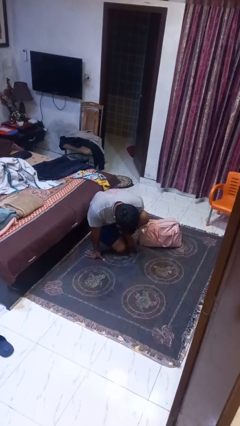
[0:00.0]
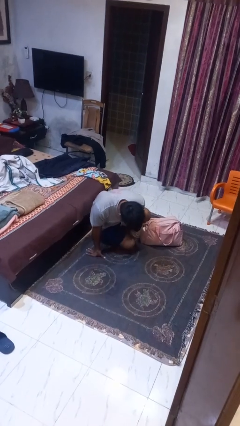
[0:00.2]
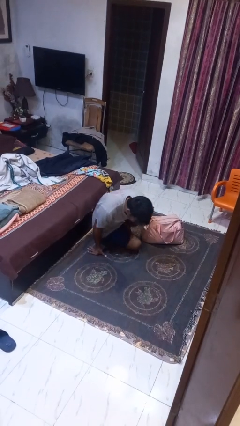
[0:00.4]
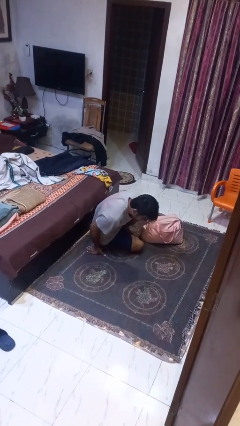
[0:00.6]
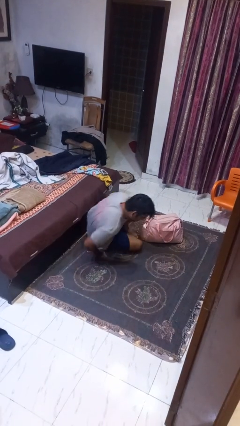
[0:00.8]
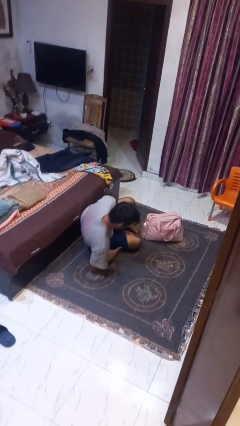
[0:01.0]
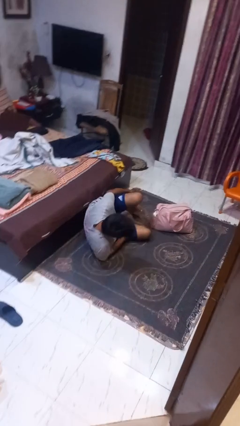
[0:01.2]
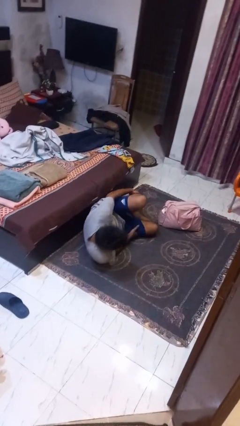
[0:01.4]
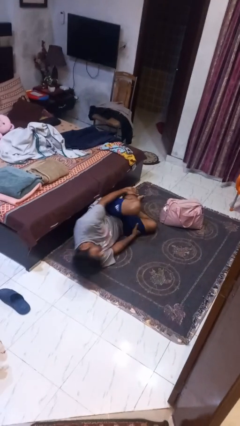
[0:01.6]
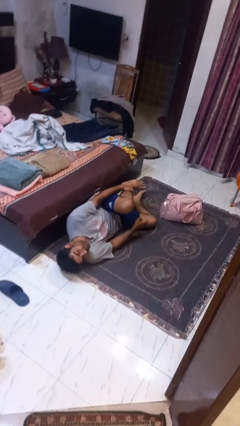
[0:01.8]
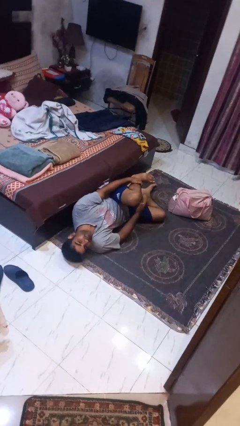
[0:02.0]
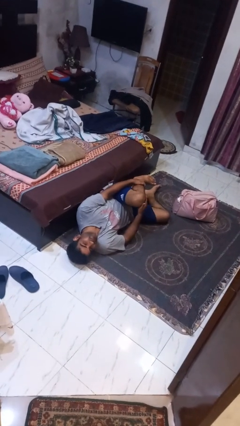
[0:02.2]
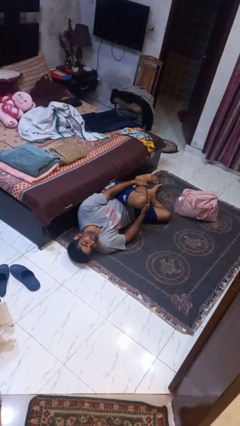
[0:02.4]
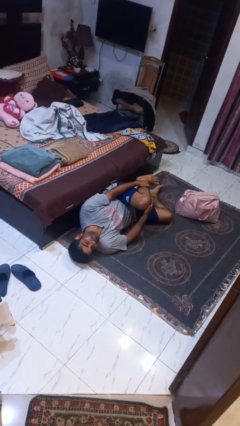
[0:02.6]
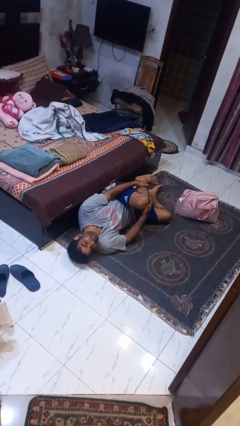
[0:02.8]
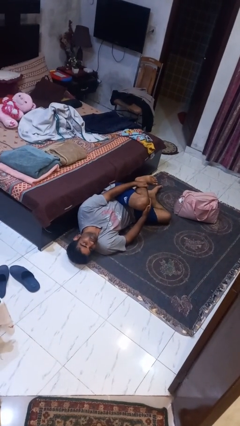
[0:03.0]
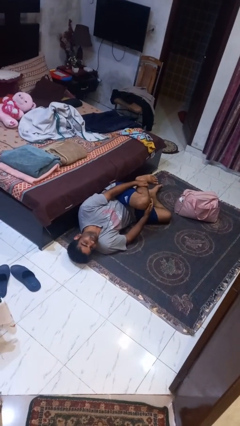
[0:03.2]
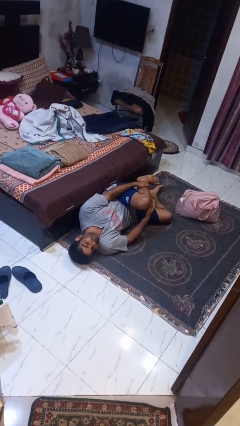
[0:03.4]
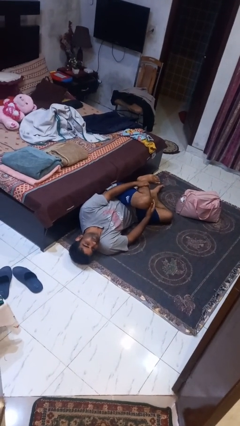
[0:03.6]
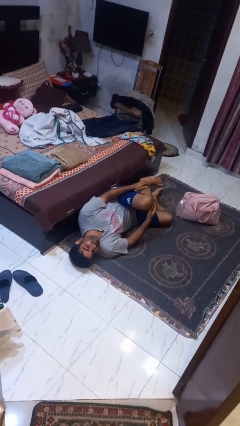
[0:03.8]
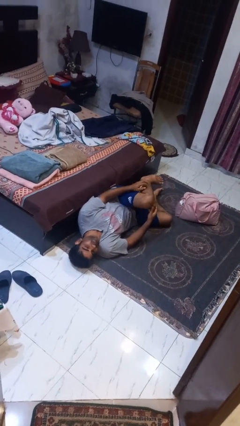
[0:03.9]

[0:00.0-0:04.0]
person lies down on floor

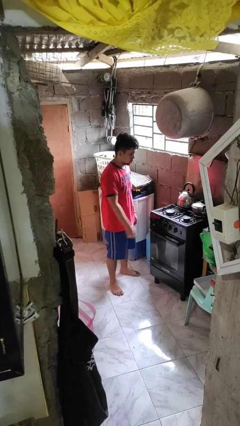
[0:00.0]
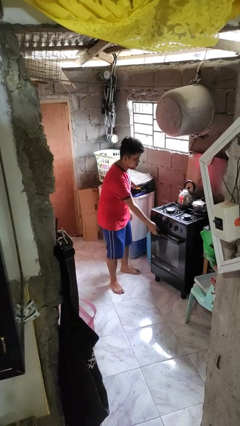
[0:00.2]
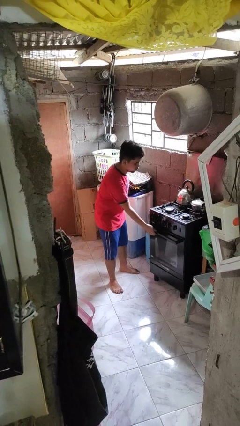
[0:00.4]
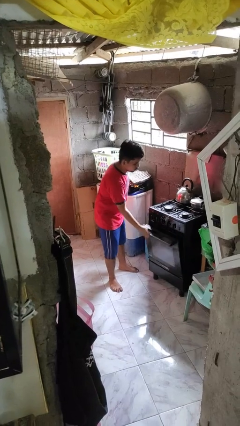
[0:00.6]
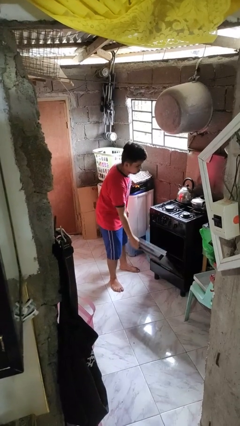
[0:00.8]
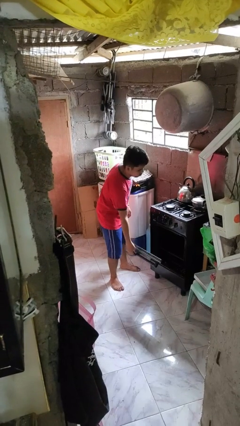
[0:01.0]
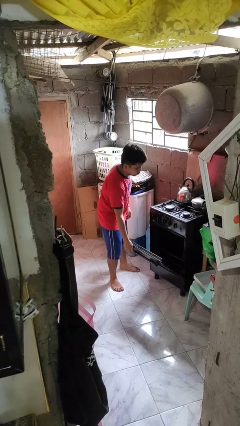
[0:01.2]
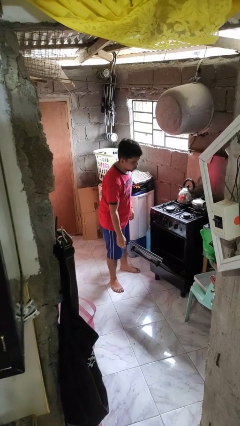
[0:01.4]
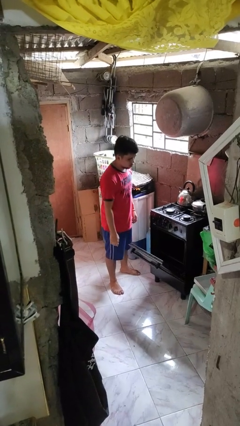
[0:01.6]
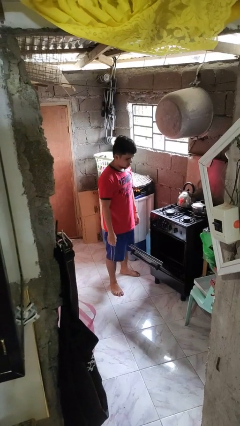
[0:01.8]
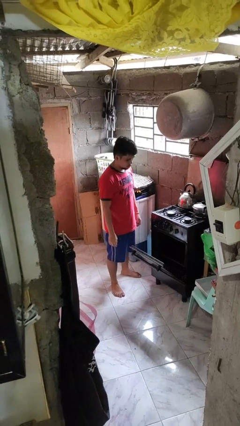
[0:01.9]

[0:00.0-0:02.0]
person opens oven door

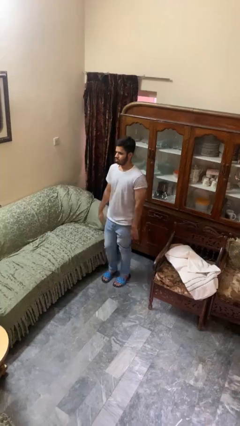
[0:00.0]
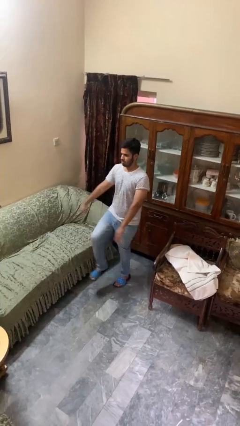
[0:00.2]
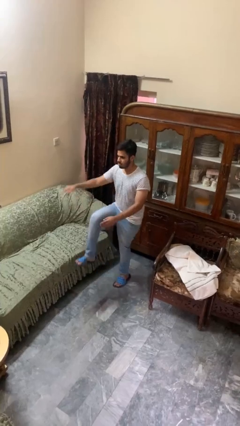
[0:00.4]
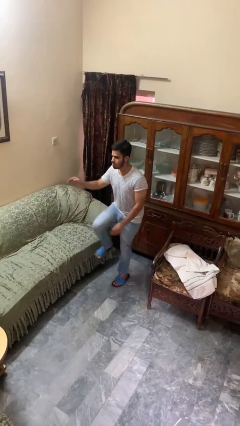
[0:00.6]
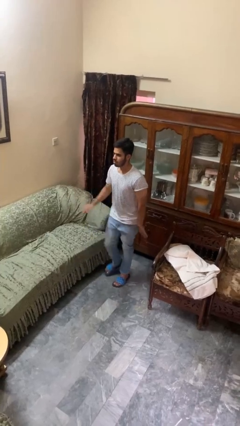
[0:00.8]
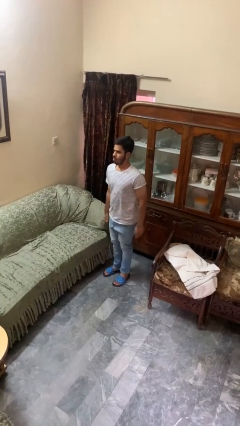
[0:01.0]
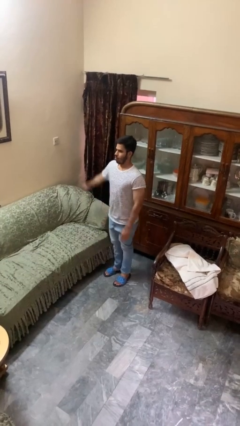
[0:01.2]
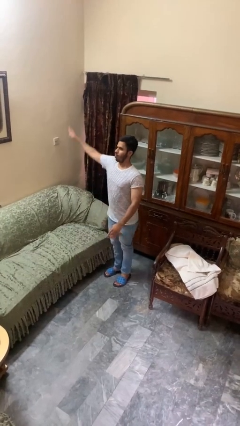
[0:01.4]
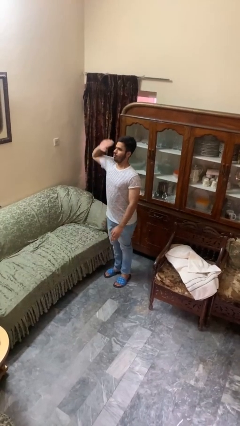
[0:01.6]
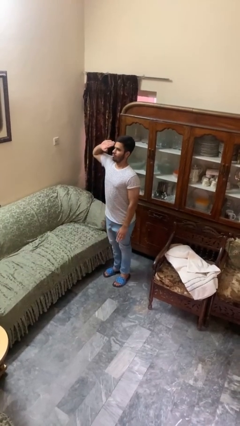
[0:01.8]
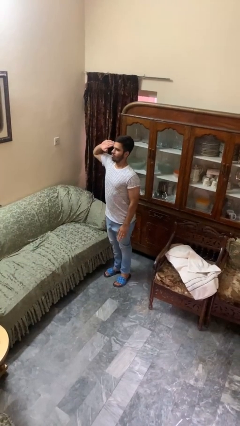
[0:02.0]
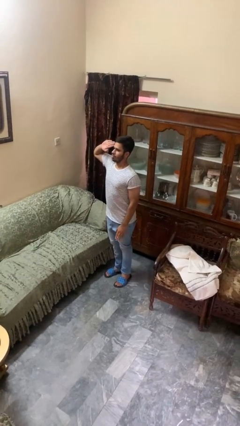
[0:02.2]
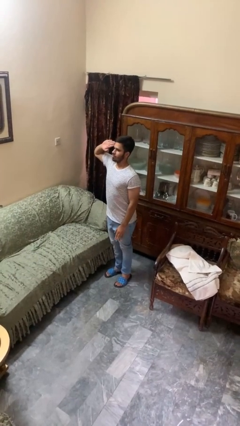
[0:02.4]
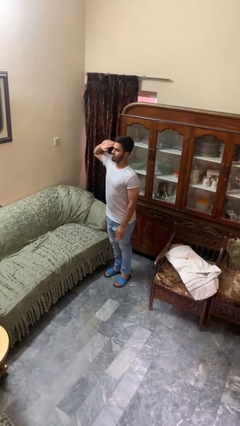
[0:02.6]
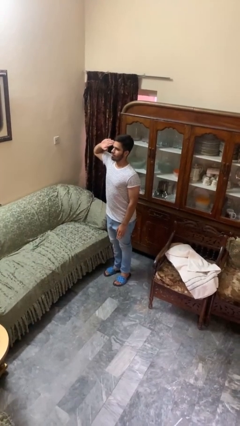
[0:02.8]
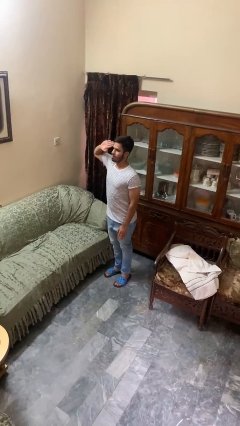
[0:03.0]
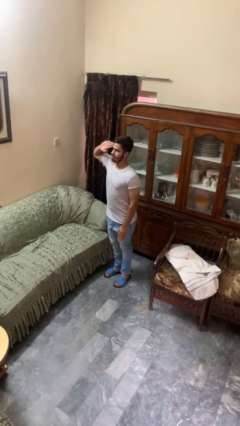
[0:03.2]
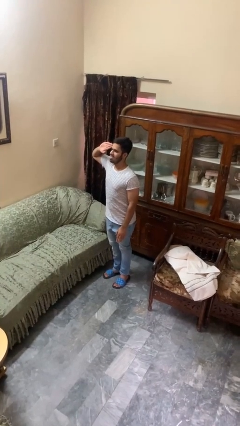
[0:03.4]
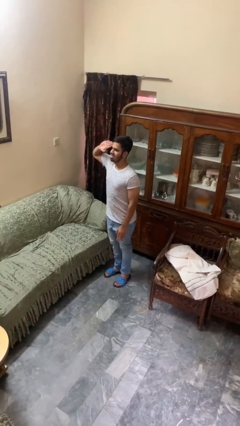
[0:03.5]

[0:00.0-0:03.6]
person salutes

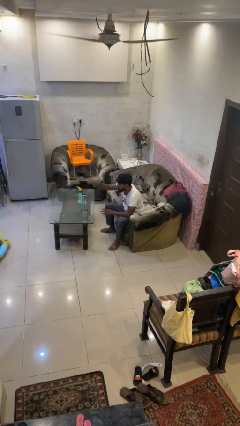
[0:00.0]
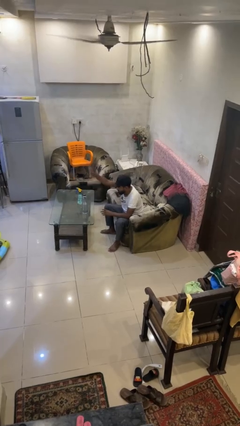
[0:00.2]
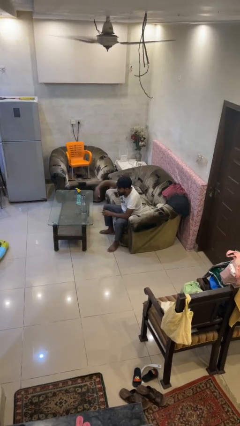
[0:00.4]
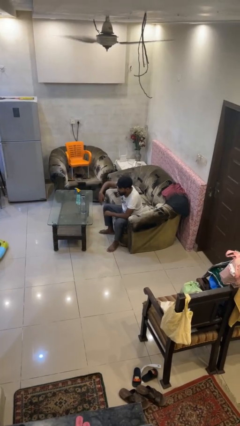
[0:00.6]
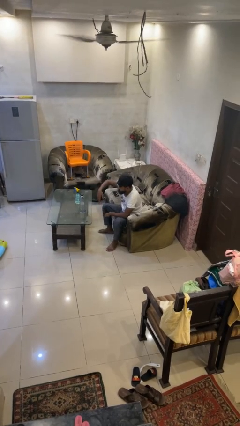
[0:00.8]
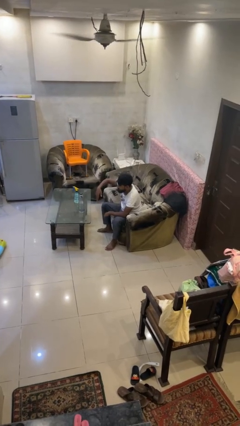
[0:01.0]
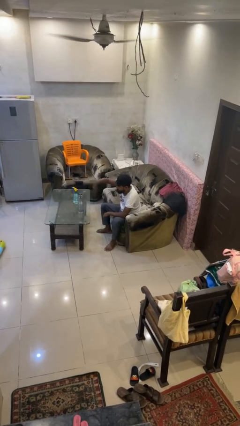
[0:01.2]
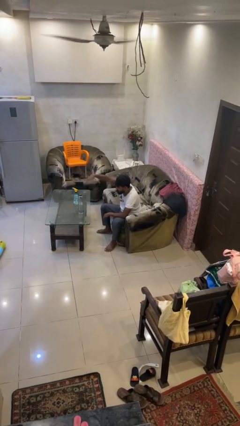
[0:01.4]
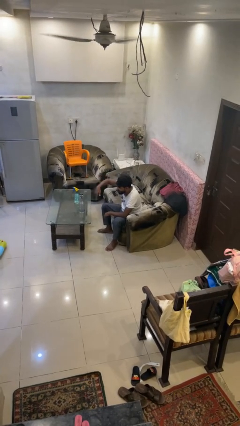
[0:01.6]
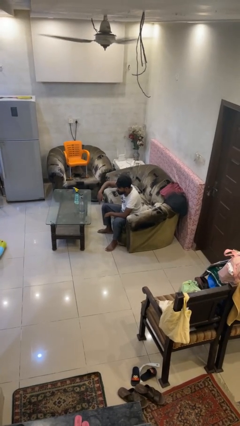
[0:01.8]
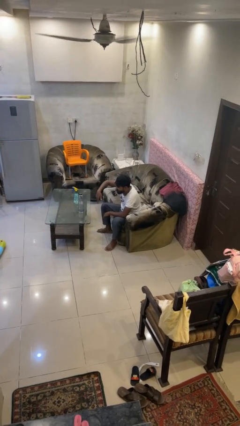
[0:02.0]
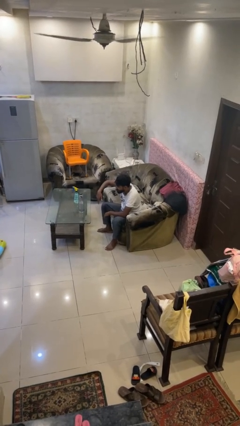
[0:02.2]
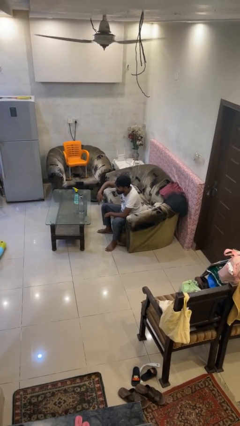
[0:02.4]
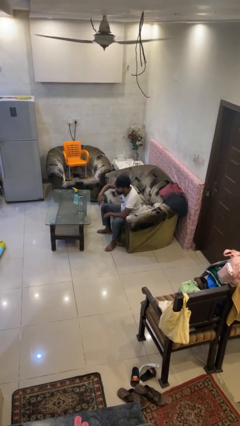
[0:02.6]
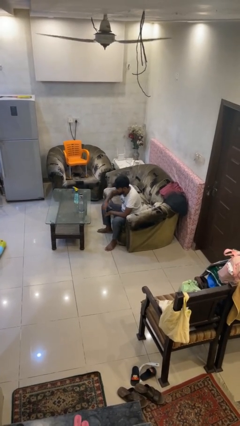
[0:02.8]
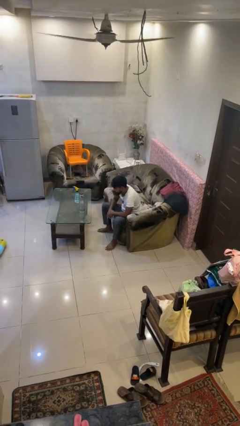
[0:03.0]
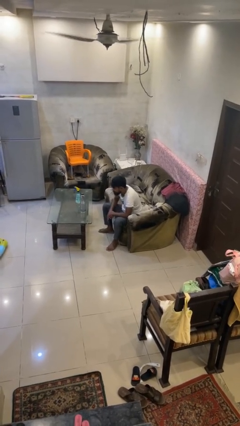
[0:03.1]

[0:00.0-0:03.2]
person gestures come here

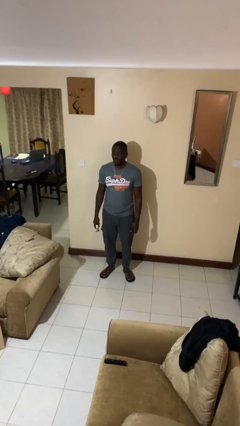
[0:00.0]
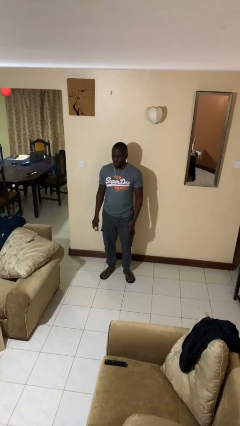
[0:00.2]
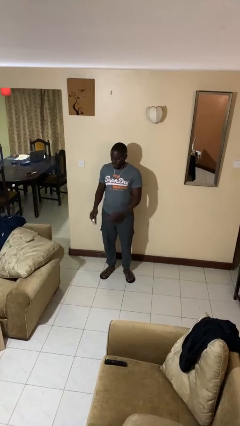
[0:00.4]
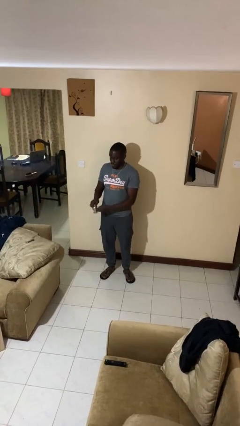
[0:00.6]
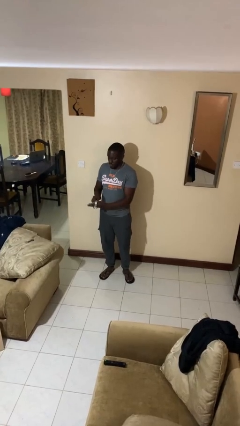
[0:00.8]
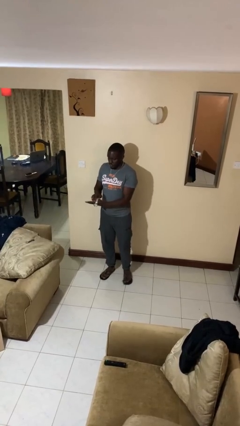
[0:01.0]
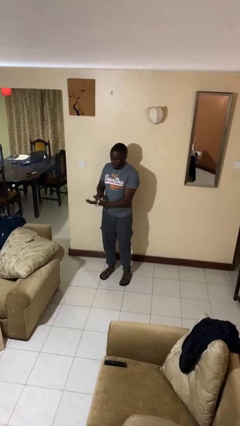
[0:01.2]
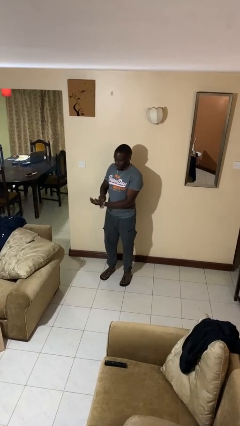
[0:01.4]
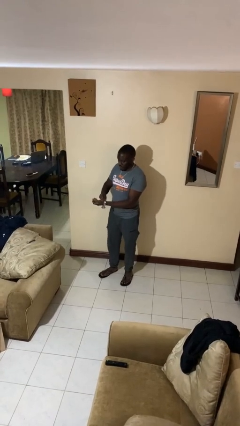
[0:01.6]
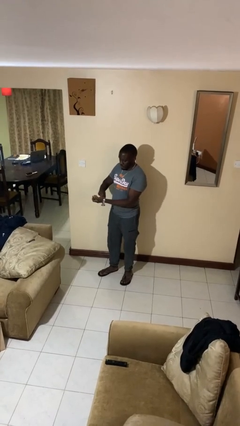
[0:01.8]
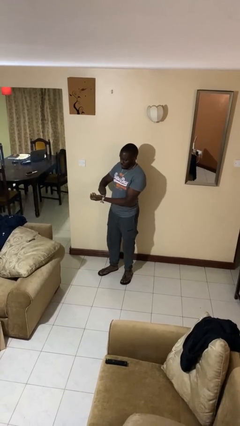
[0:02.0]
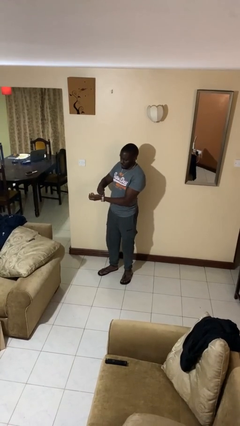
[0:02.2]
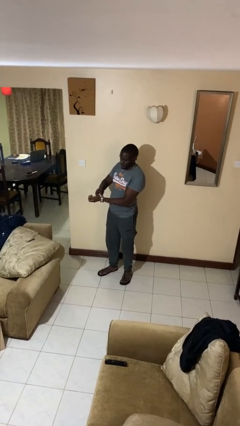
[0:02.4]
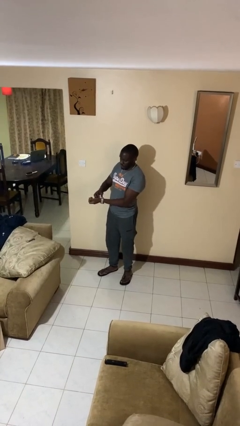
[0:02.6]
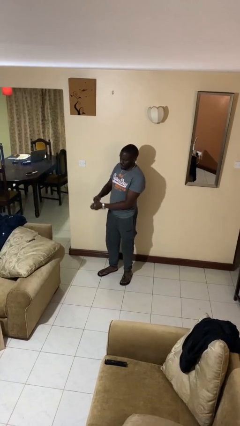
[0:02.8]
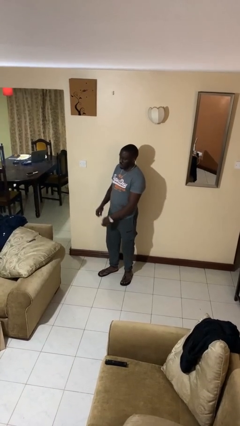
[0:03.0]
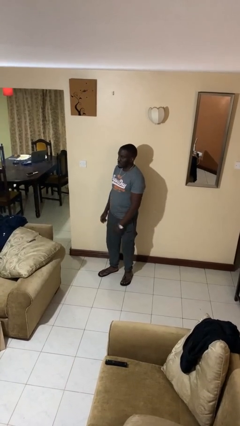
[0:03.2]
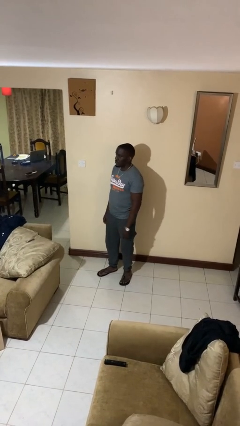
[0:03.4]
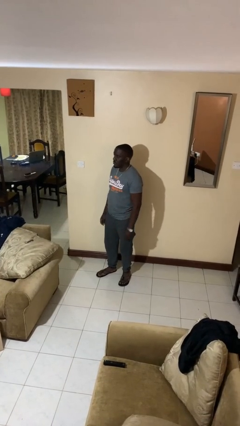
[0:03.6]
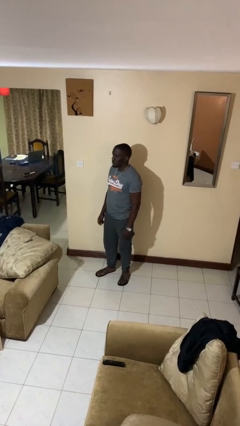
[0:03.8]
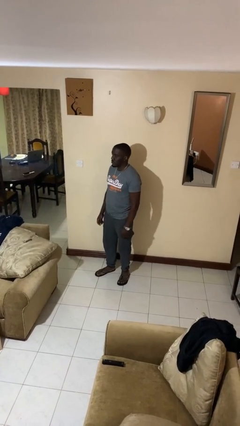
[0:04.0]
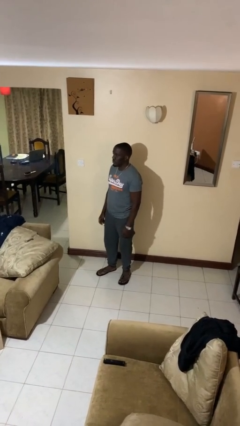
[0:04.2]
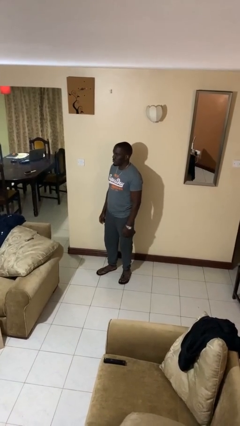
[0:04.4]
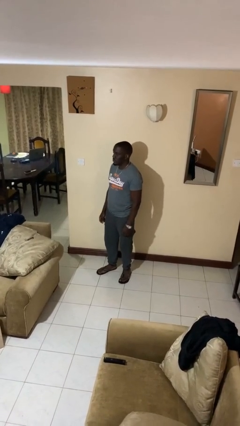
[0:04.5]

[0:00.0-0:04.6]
person puts on wristwatch

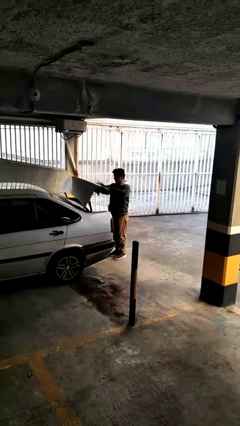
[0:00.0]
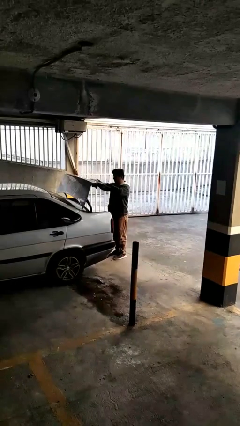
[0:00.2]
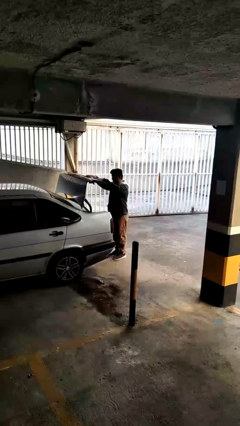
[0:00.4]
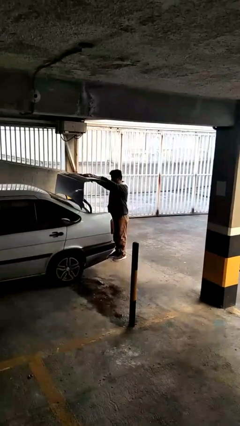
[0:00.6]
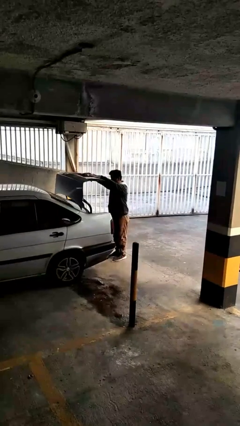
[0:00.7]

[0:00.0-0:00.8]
person opens car trunk
